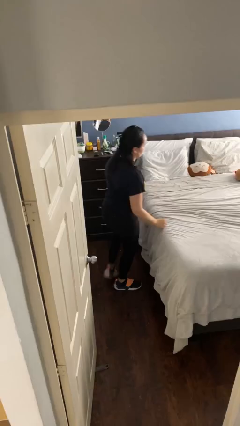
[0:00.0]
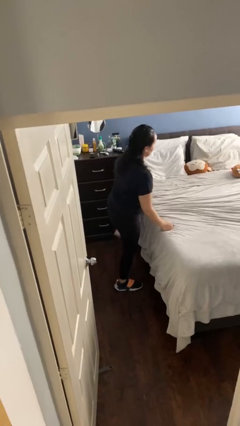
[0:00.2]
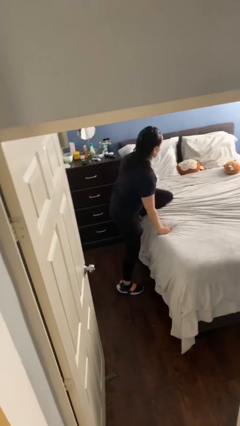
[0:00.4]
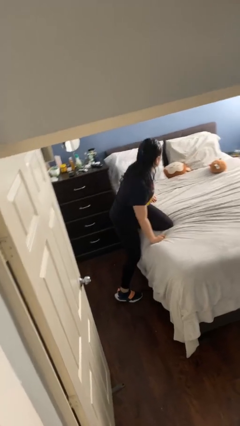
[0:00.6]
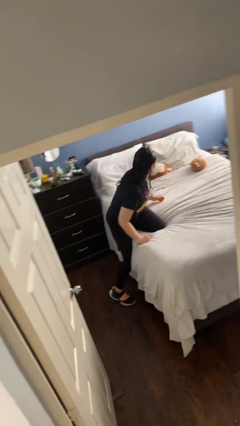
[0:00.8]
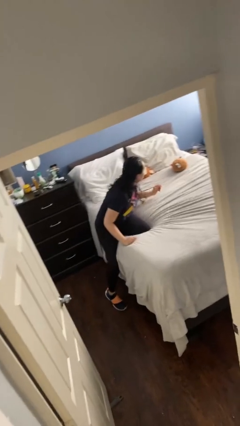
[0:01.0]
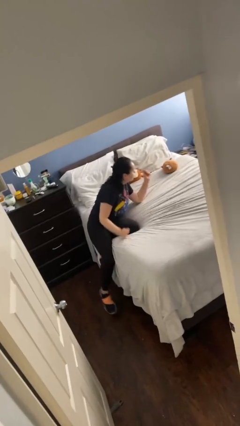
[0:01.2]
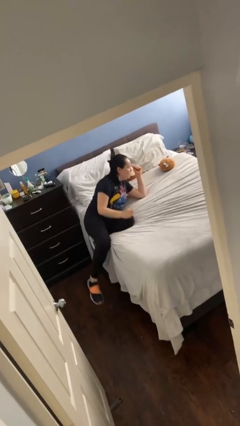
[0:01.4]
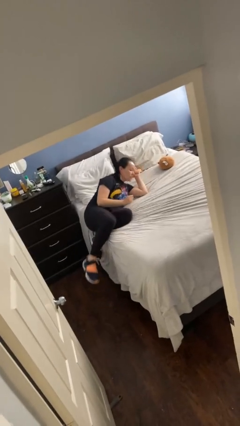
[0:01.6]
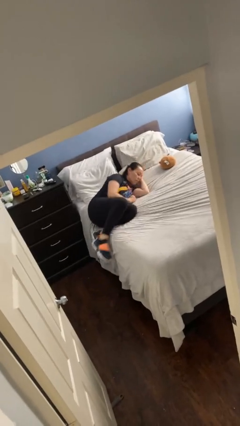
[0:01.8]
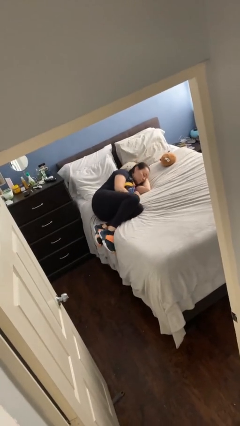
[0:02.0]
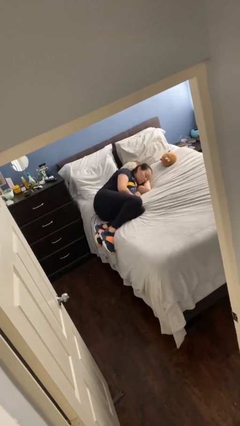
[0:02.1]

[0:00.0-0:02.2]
person lies down on bed

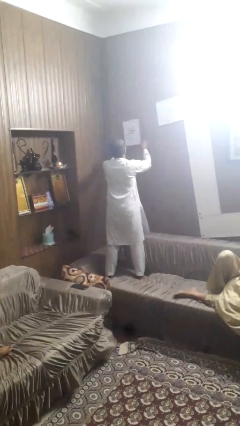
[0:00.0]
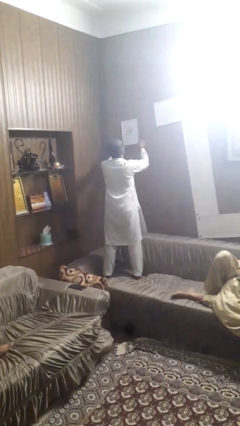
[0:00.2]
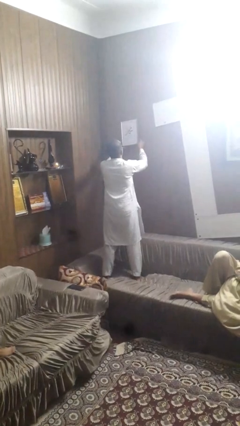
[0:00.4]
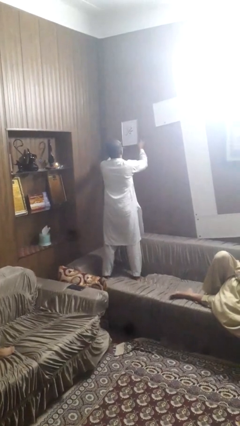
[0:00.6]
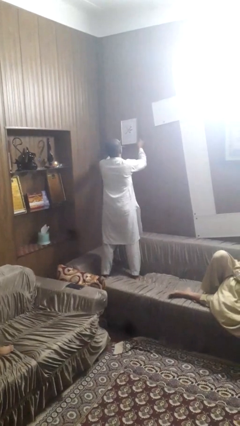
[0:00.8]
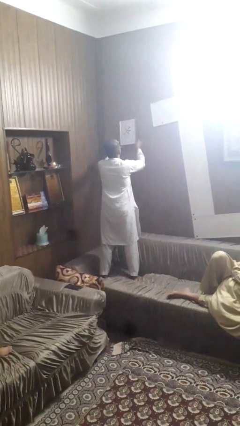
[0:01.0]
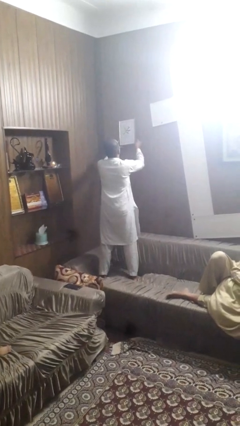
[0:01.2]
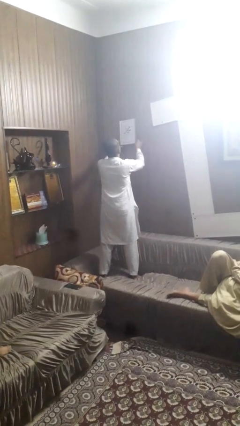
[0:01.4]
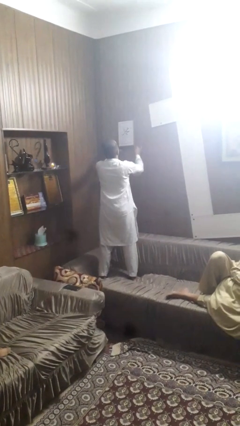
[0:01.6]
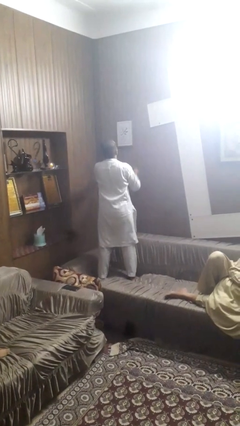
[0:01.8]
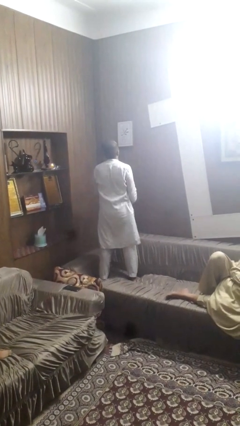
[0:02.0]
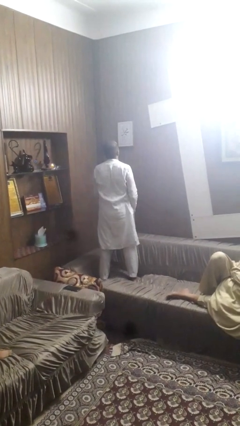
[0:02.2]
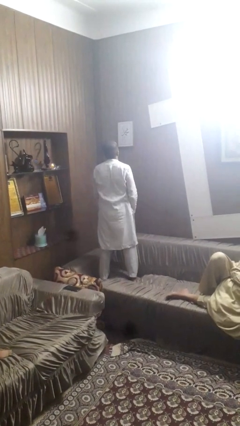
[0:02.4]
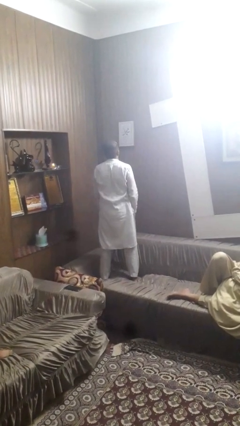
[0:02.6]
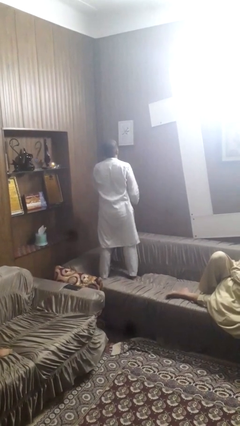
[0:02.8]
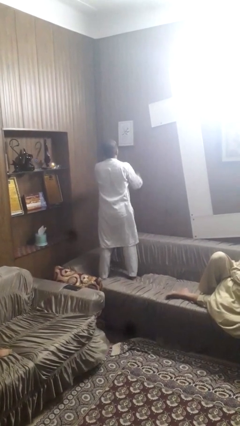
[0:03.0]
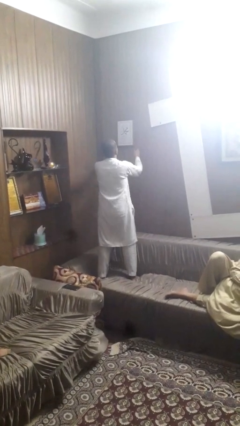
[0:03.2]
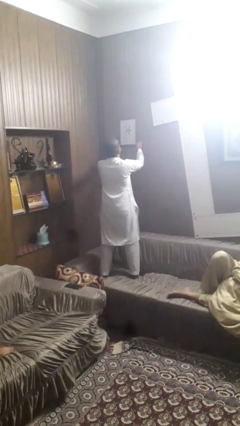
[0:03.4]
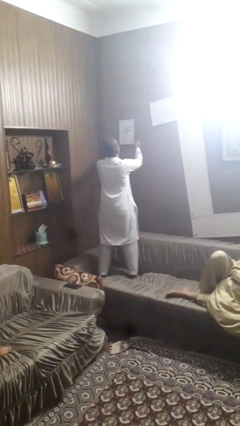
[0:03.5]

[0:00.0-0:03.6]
person puts up picture frame

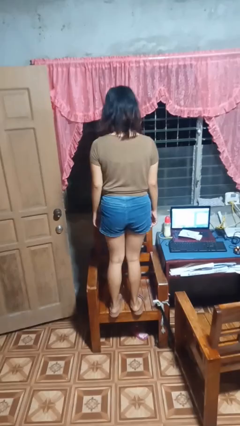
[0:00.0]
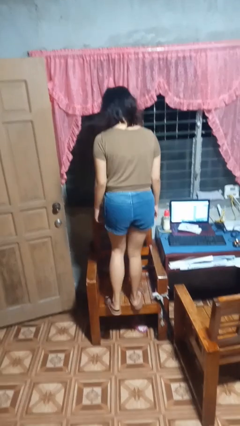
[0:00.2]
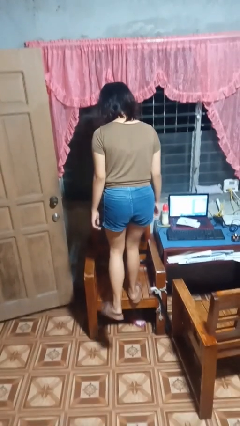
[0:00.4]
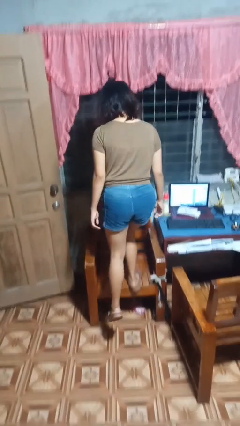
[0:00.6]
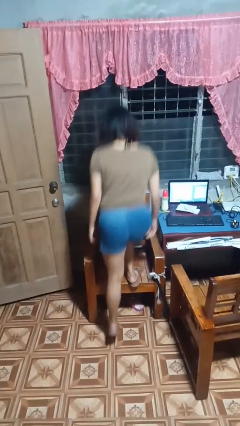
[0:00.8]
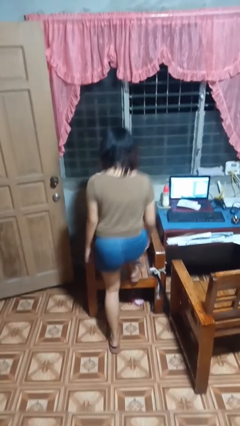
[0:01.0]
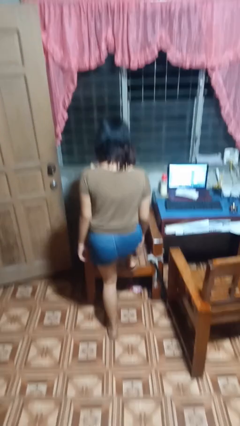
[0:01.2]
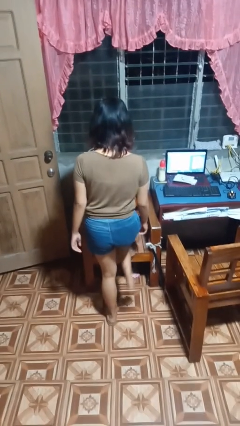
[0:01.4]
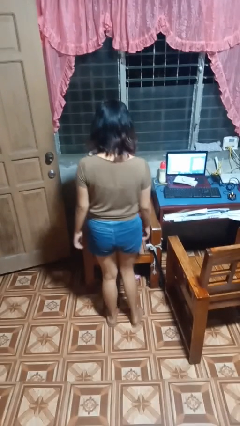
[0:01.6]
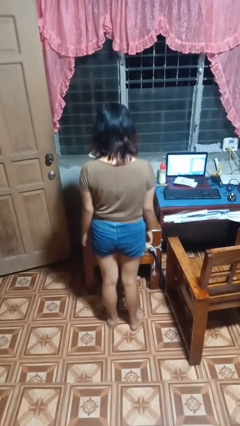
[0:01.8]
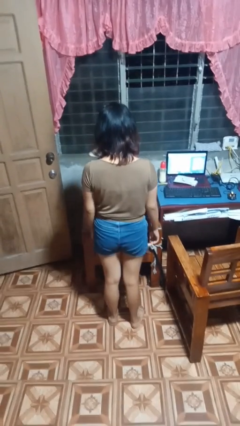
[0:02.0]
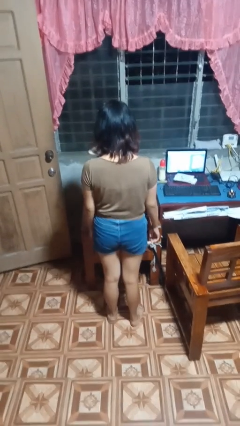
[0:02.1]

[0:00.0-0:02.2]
person climbs off chair

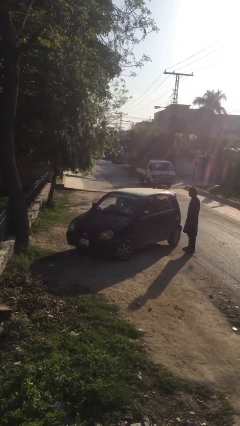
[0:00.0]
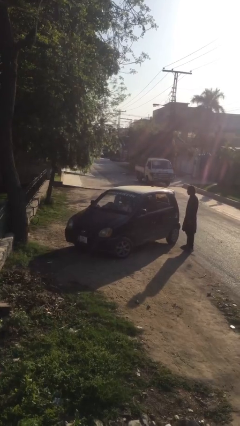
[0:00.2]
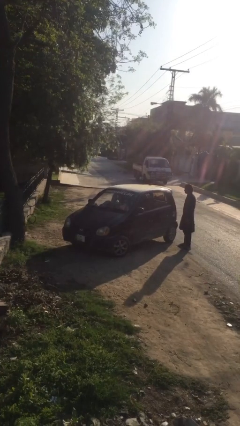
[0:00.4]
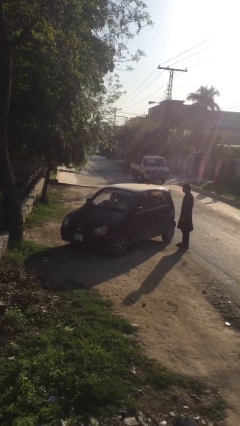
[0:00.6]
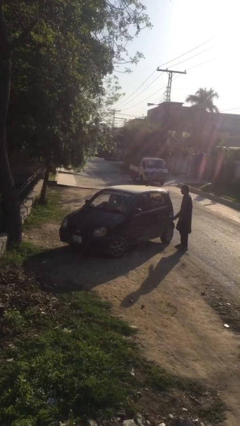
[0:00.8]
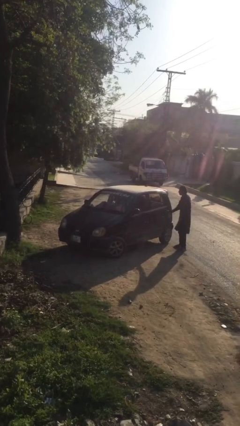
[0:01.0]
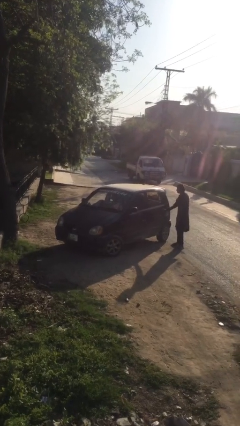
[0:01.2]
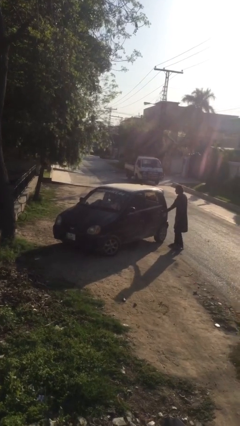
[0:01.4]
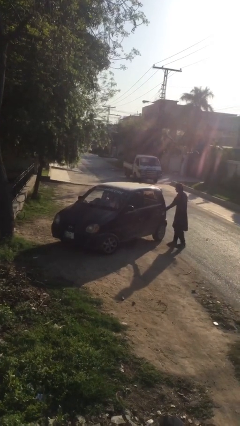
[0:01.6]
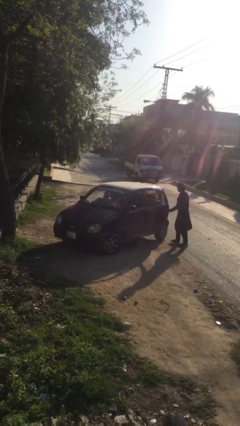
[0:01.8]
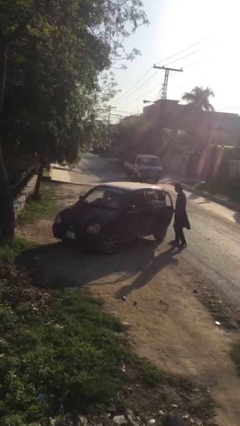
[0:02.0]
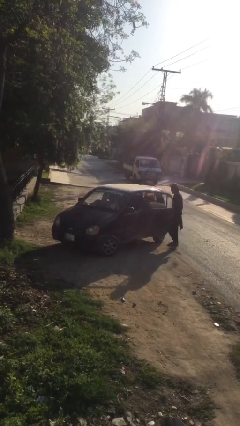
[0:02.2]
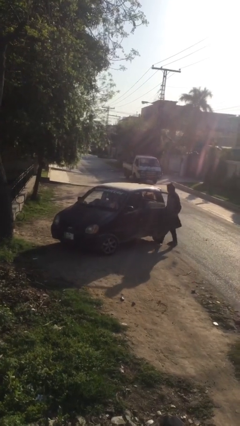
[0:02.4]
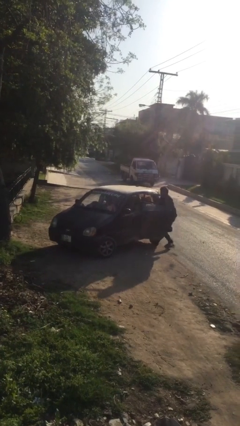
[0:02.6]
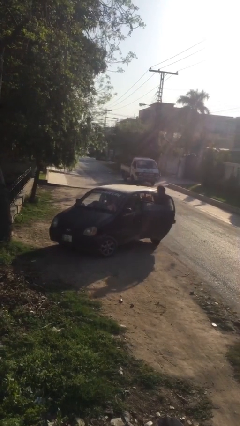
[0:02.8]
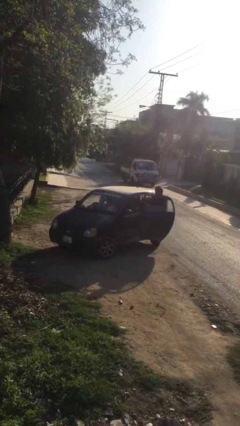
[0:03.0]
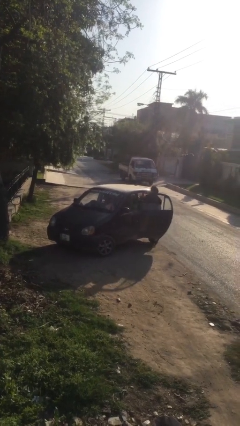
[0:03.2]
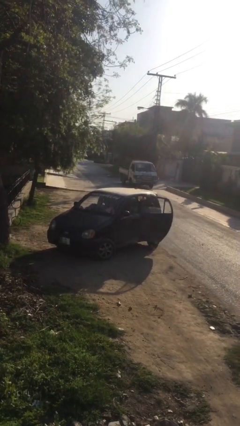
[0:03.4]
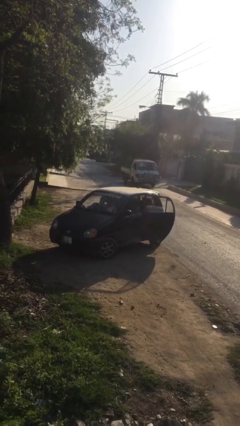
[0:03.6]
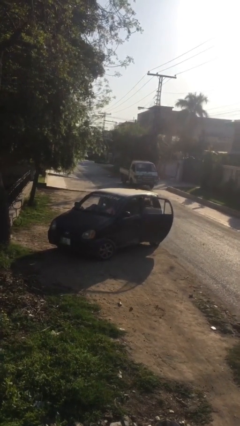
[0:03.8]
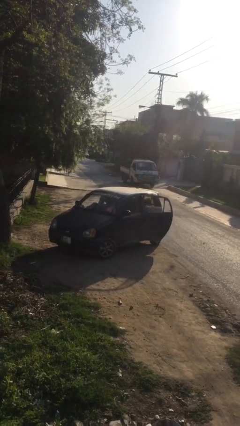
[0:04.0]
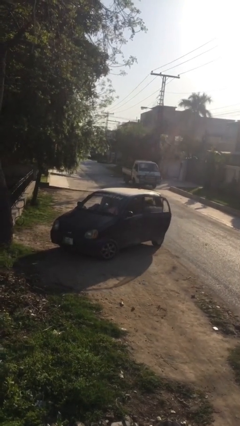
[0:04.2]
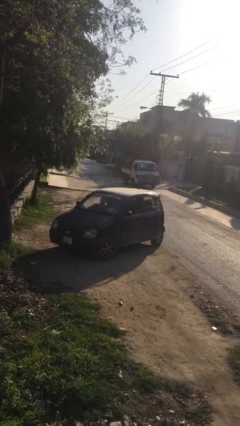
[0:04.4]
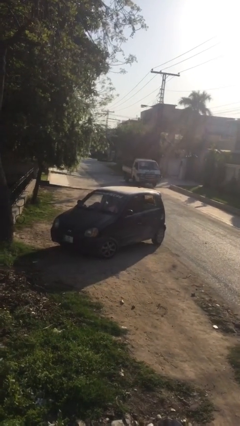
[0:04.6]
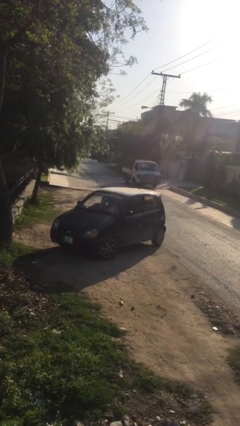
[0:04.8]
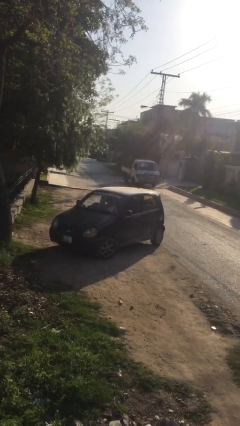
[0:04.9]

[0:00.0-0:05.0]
car picks up person

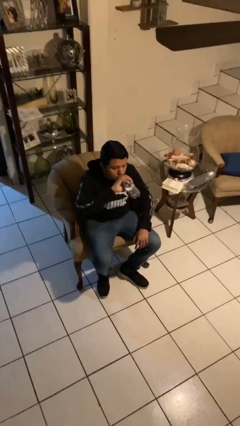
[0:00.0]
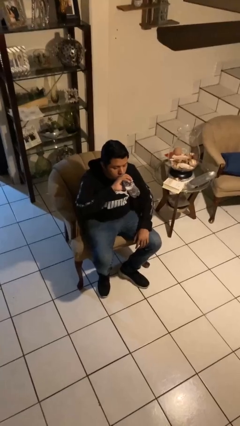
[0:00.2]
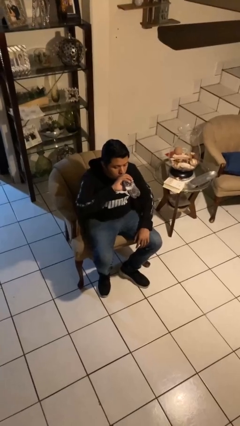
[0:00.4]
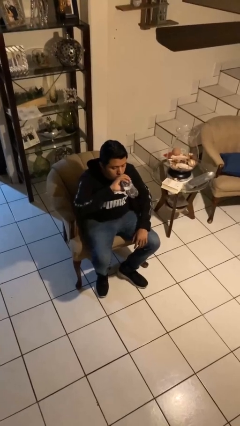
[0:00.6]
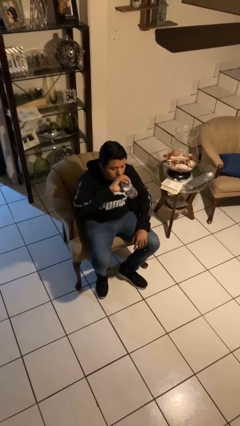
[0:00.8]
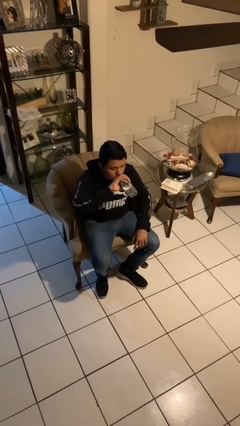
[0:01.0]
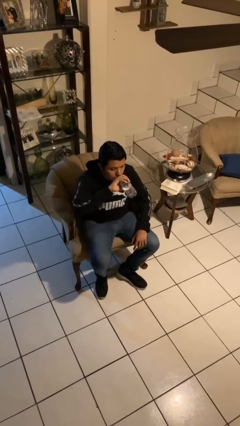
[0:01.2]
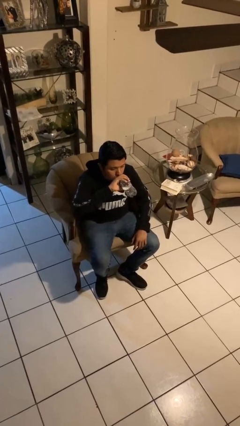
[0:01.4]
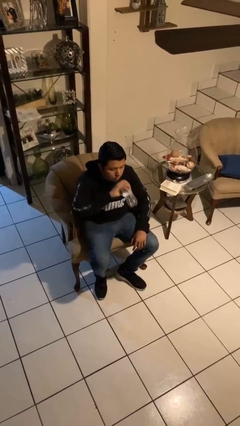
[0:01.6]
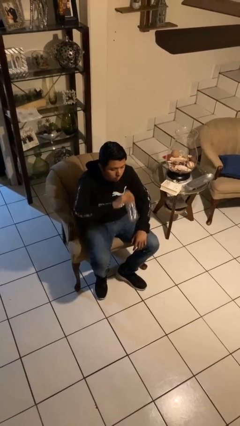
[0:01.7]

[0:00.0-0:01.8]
person drinks from bottle

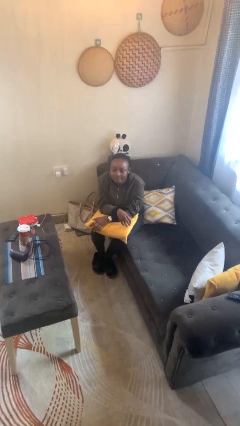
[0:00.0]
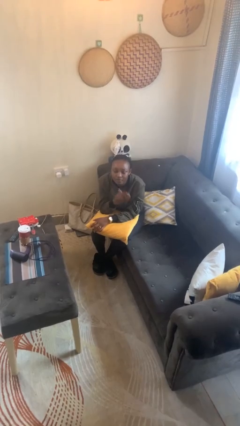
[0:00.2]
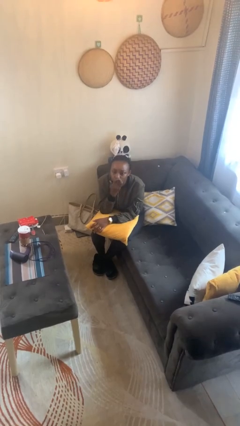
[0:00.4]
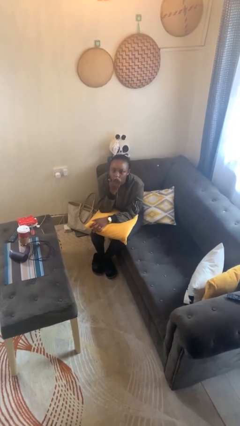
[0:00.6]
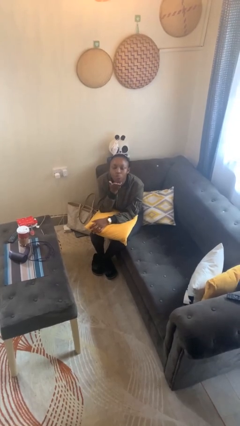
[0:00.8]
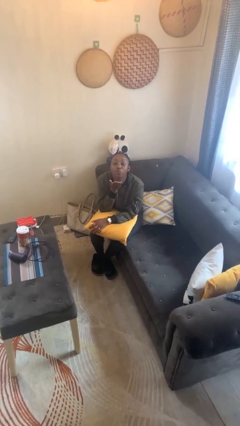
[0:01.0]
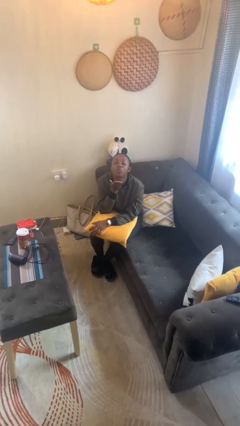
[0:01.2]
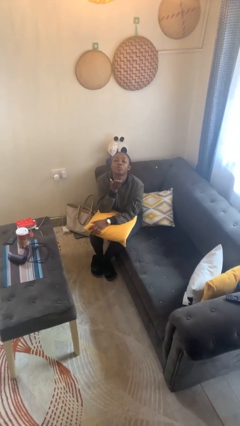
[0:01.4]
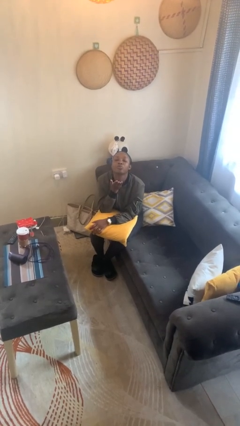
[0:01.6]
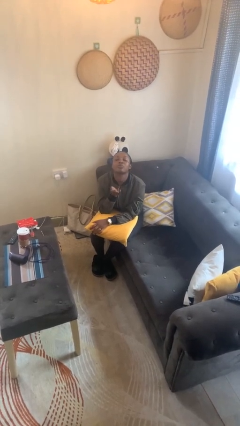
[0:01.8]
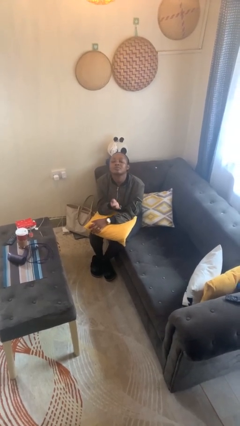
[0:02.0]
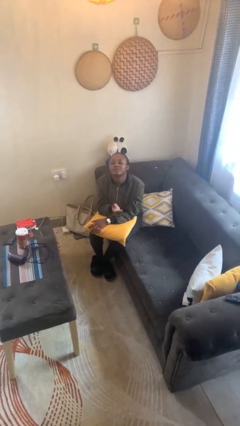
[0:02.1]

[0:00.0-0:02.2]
person gestures blow kiss

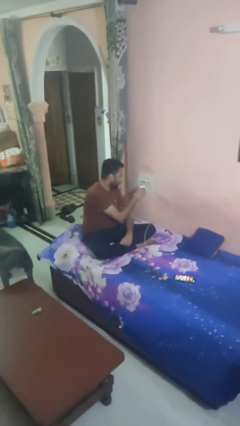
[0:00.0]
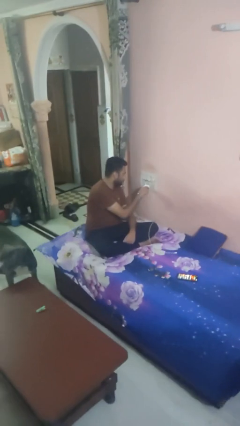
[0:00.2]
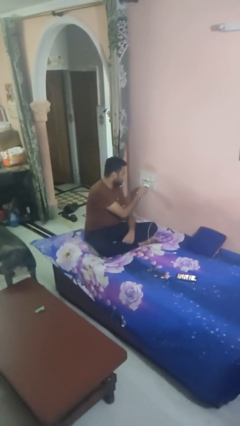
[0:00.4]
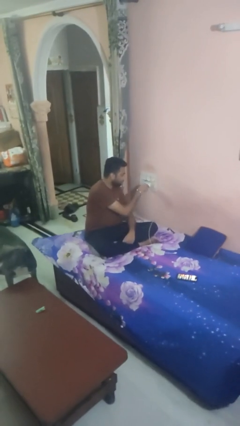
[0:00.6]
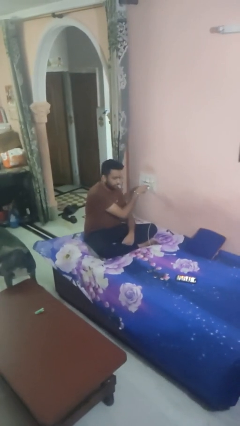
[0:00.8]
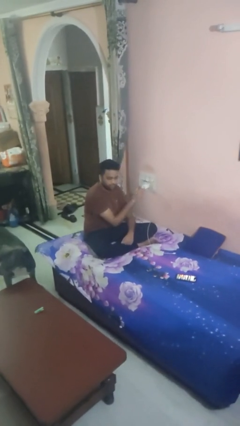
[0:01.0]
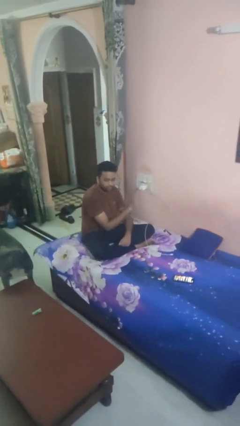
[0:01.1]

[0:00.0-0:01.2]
person plugs into electrical socket
